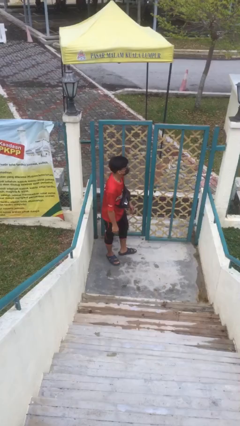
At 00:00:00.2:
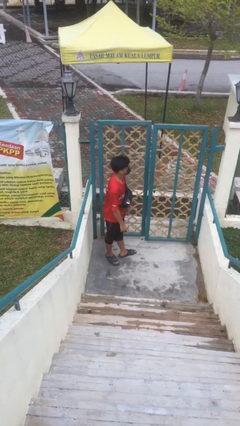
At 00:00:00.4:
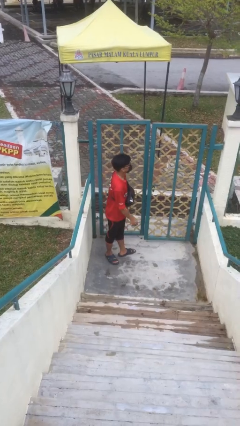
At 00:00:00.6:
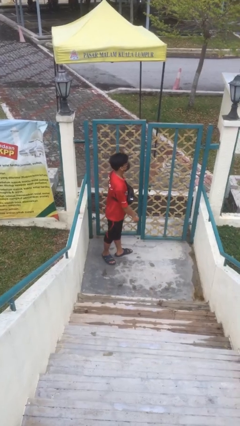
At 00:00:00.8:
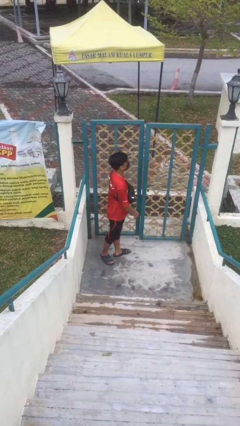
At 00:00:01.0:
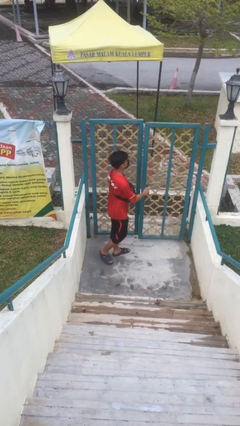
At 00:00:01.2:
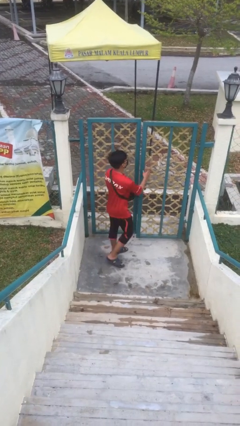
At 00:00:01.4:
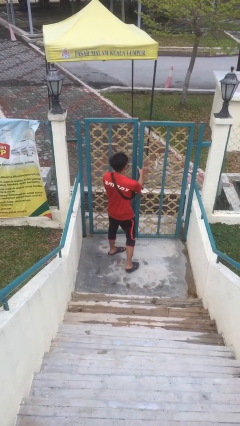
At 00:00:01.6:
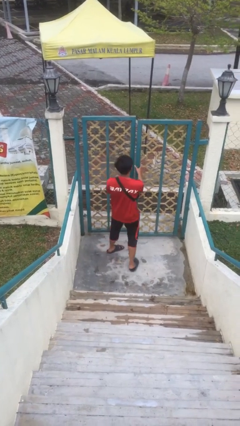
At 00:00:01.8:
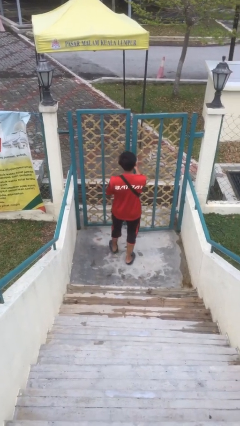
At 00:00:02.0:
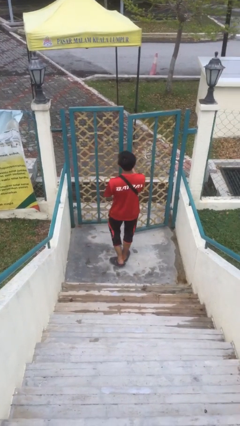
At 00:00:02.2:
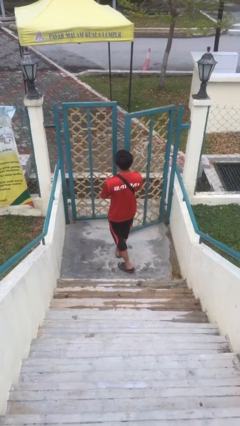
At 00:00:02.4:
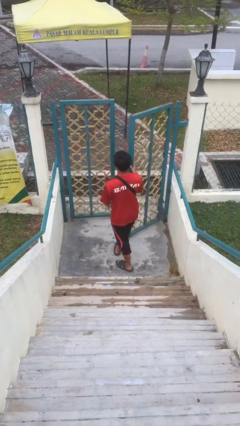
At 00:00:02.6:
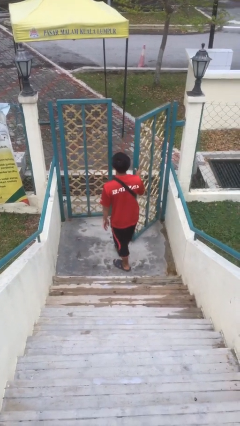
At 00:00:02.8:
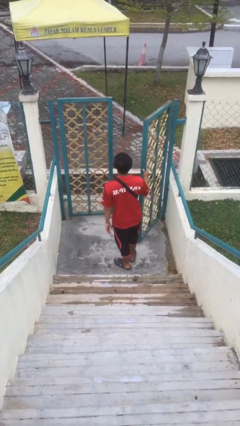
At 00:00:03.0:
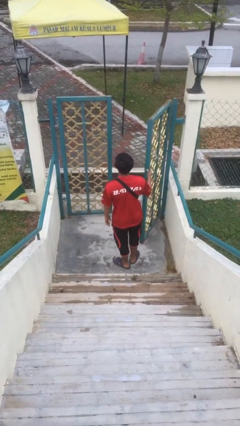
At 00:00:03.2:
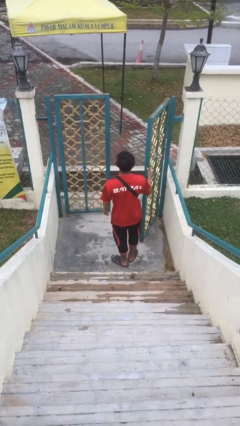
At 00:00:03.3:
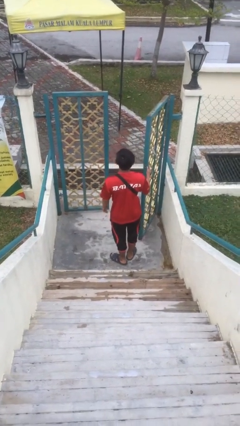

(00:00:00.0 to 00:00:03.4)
person opens facility door

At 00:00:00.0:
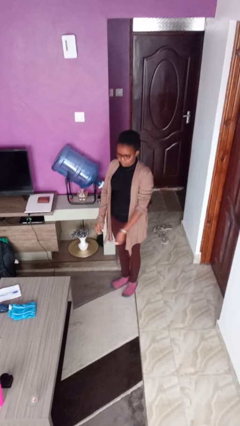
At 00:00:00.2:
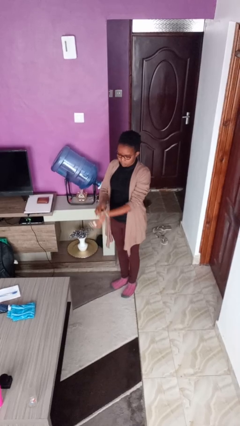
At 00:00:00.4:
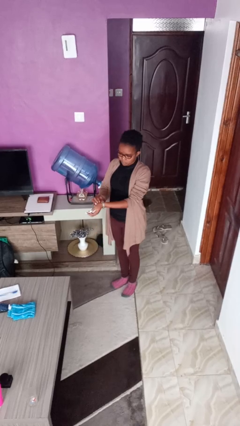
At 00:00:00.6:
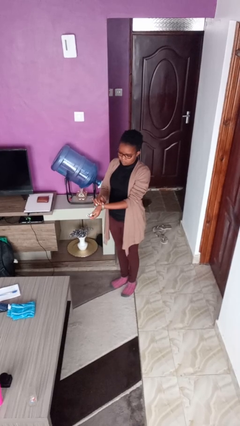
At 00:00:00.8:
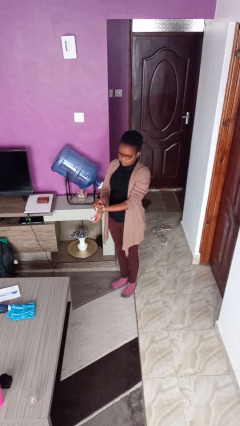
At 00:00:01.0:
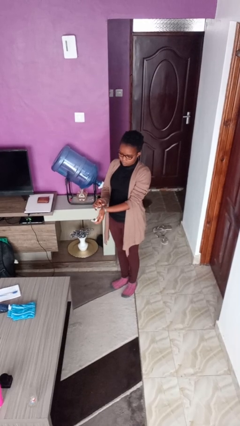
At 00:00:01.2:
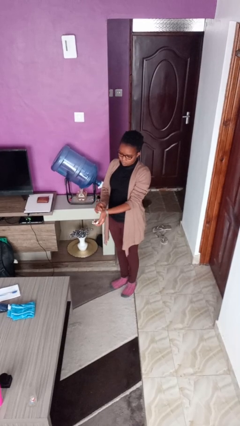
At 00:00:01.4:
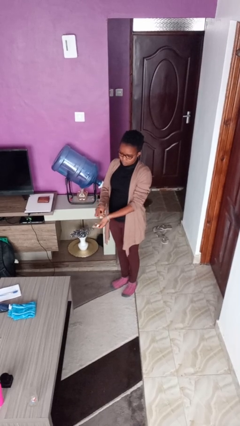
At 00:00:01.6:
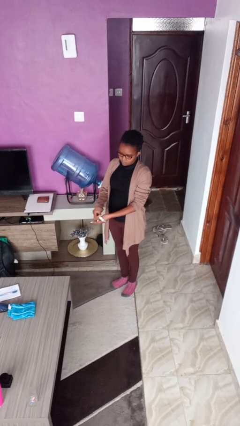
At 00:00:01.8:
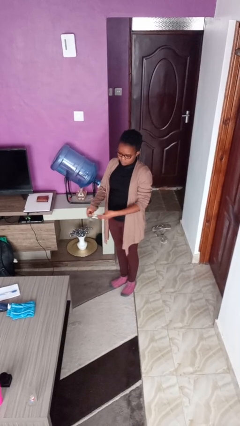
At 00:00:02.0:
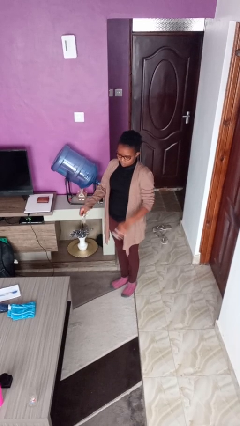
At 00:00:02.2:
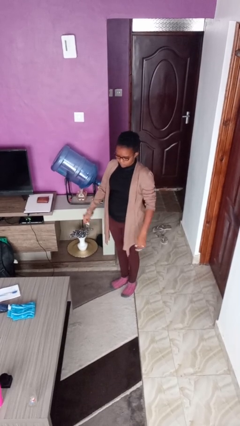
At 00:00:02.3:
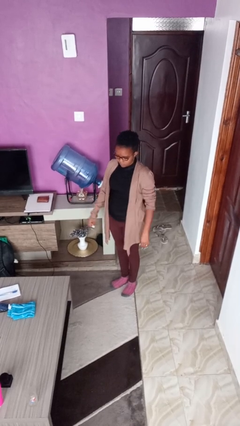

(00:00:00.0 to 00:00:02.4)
person takes off wristwatch

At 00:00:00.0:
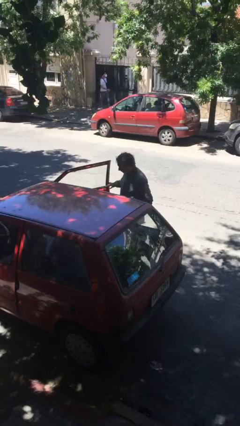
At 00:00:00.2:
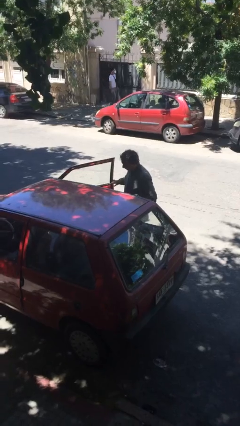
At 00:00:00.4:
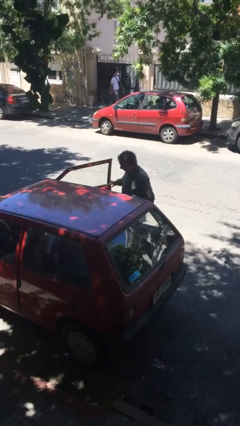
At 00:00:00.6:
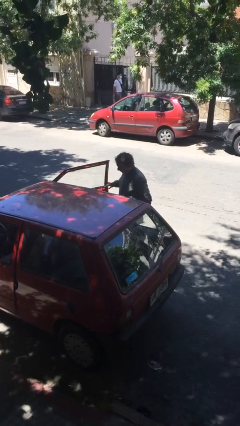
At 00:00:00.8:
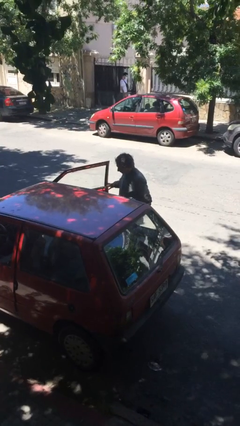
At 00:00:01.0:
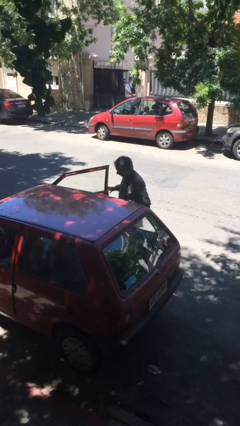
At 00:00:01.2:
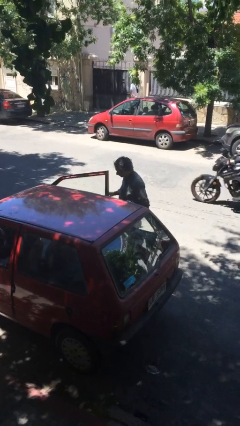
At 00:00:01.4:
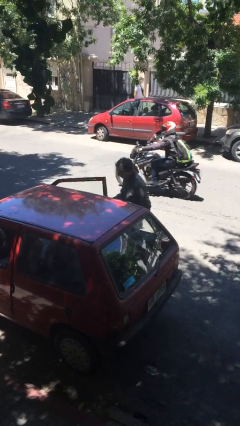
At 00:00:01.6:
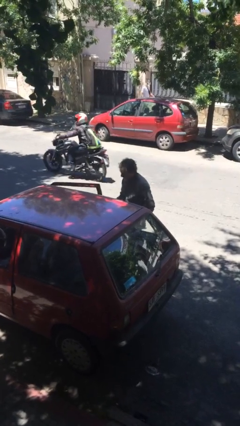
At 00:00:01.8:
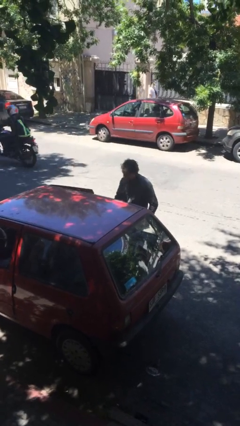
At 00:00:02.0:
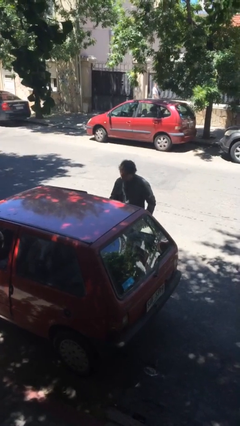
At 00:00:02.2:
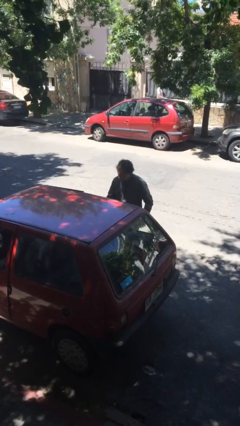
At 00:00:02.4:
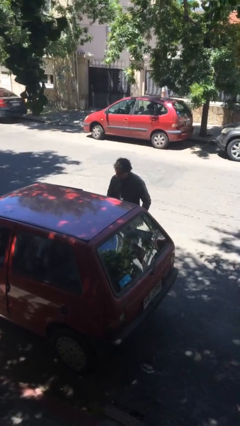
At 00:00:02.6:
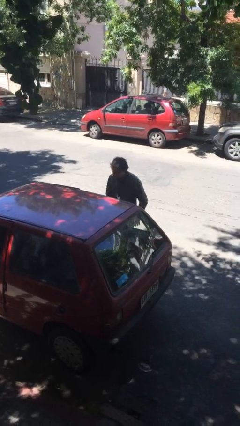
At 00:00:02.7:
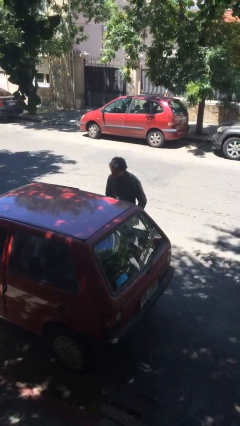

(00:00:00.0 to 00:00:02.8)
person closes car door

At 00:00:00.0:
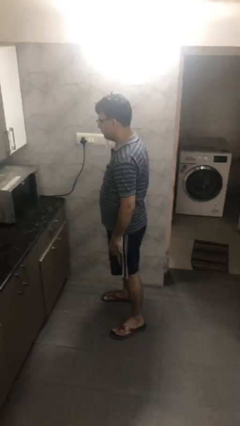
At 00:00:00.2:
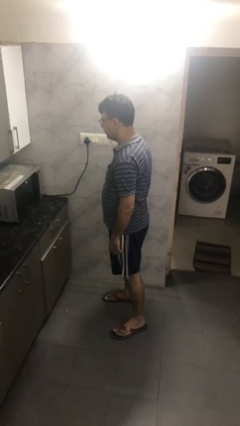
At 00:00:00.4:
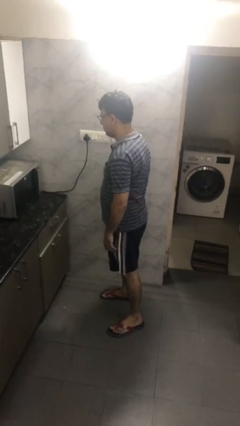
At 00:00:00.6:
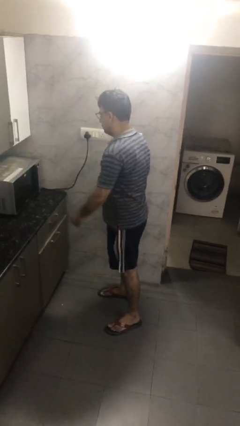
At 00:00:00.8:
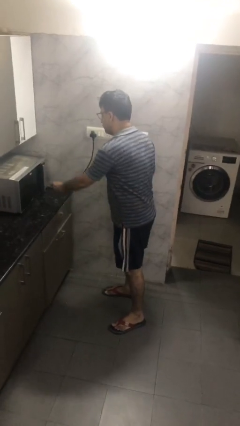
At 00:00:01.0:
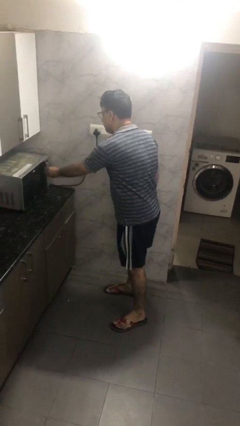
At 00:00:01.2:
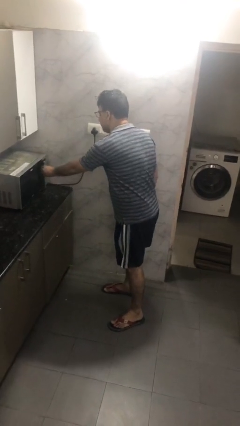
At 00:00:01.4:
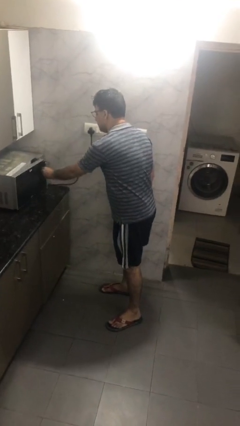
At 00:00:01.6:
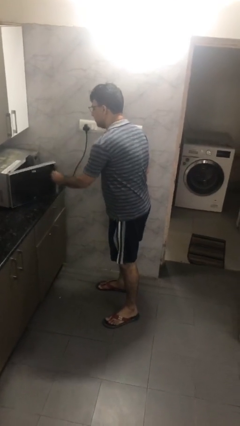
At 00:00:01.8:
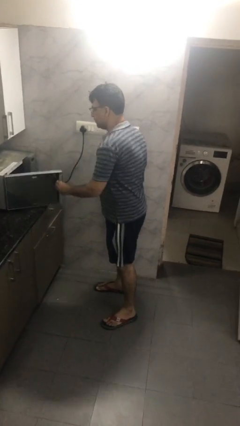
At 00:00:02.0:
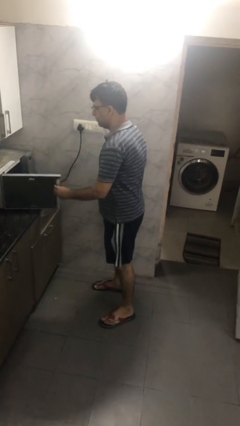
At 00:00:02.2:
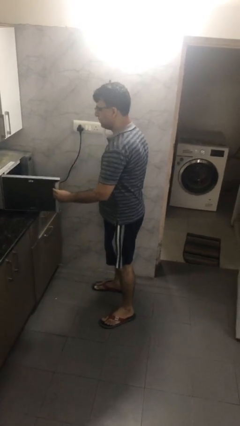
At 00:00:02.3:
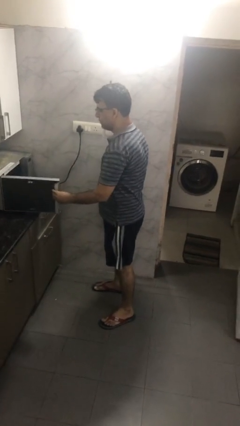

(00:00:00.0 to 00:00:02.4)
person opens microwave

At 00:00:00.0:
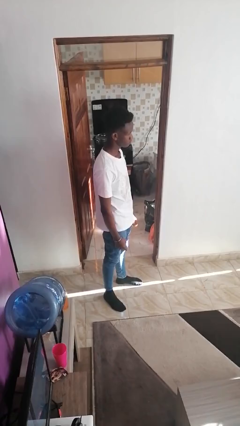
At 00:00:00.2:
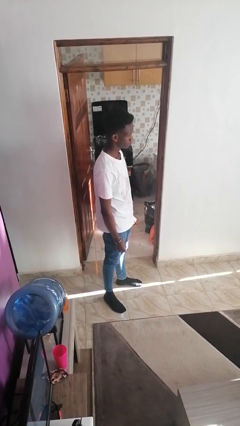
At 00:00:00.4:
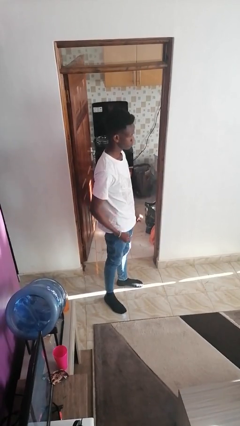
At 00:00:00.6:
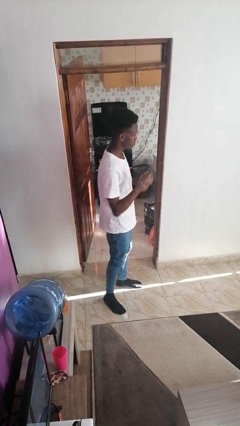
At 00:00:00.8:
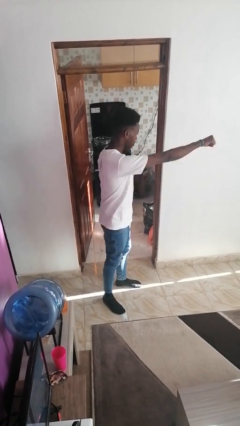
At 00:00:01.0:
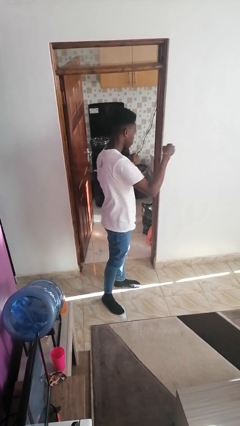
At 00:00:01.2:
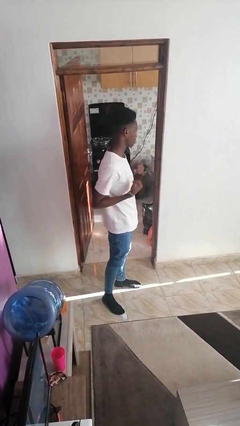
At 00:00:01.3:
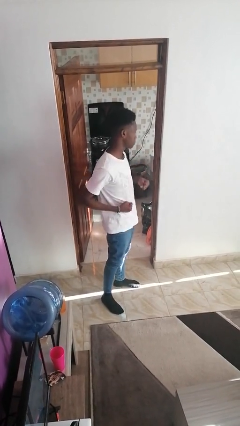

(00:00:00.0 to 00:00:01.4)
person punches

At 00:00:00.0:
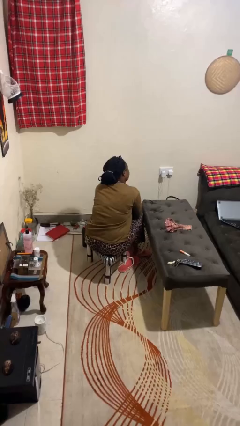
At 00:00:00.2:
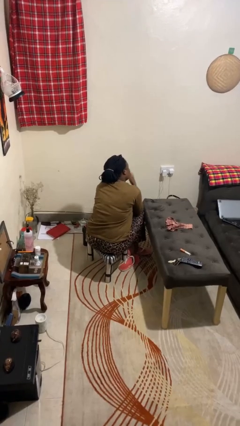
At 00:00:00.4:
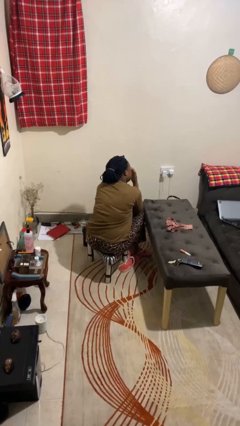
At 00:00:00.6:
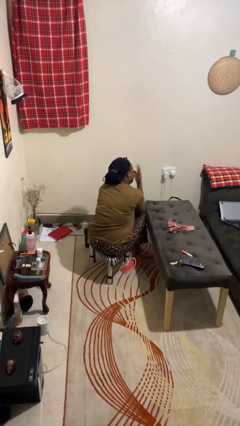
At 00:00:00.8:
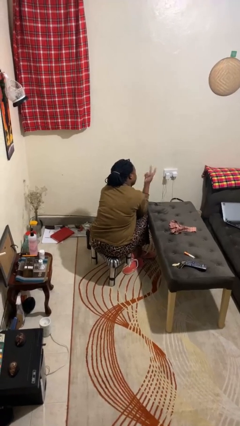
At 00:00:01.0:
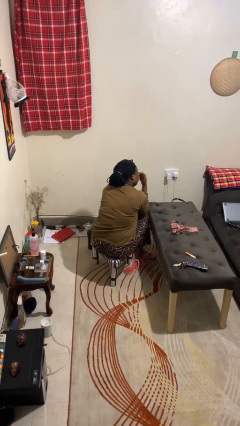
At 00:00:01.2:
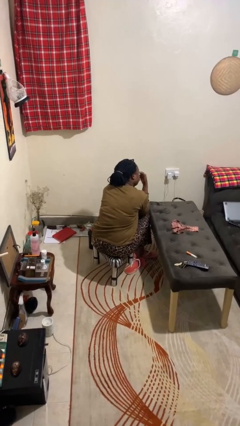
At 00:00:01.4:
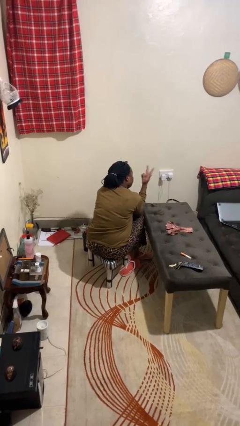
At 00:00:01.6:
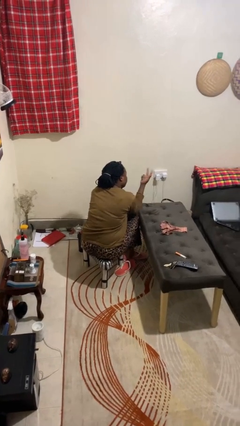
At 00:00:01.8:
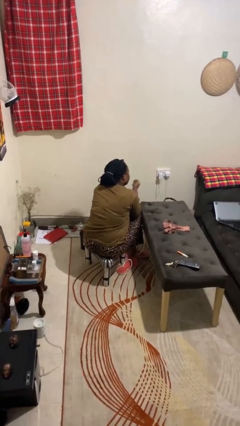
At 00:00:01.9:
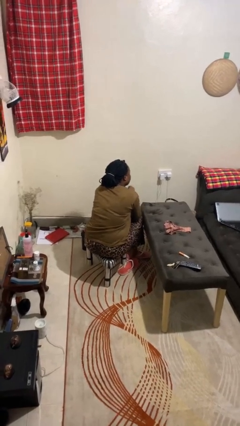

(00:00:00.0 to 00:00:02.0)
person gestures watch closely

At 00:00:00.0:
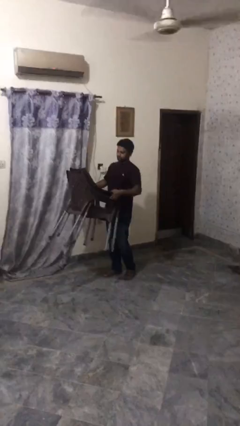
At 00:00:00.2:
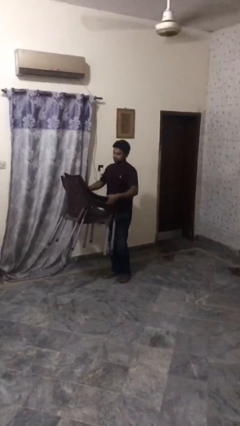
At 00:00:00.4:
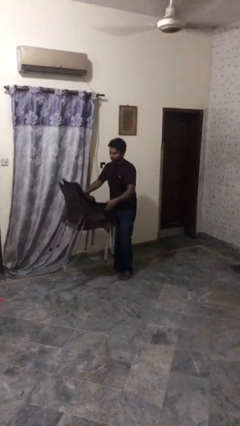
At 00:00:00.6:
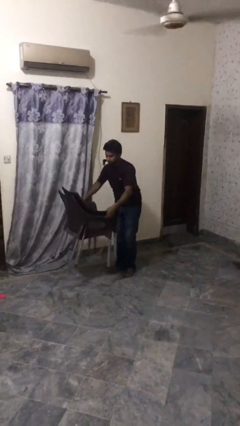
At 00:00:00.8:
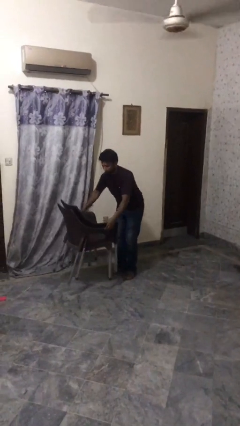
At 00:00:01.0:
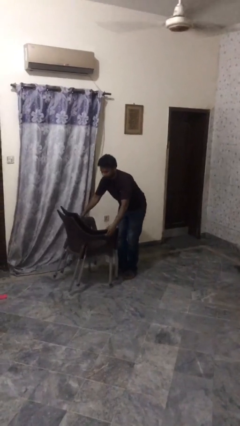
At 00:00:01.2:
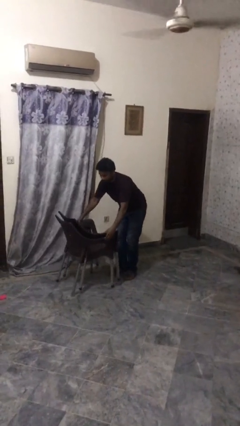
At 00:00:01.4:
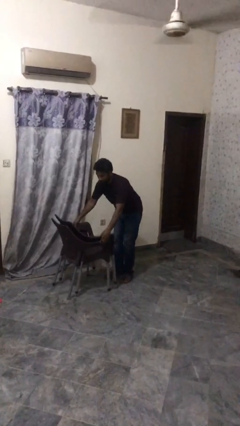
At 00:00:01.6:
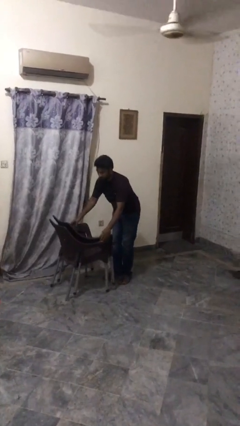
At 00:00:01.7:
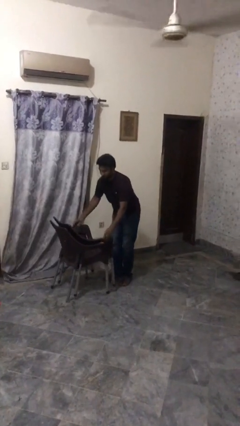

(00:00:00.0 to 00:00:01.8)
person puts down object on floor

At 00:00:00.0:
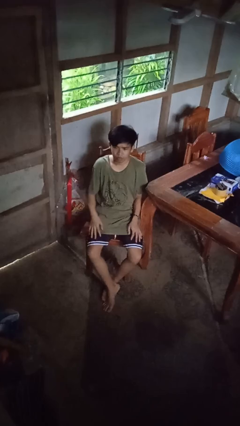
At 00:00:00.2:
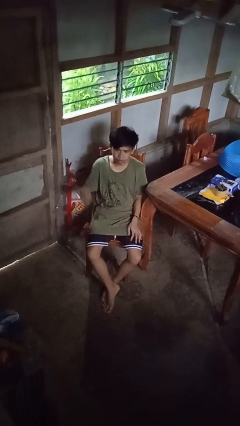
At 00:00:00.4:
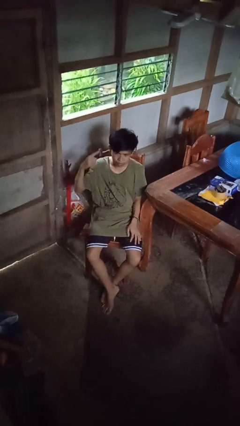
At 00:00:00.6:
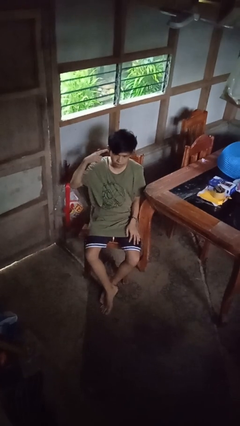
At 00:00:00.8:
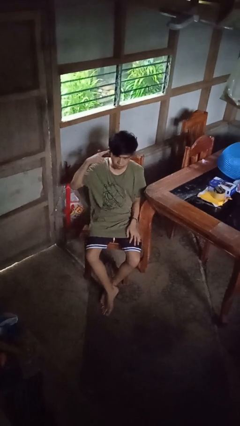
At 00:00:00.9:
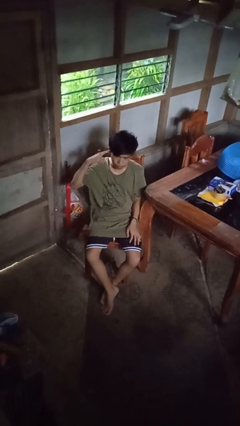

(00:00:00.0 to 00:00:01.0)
person gestures listen closely
